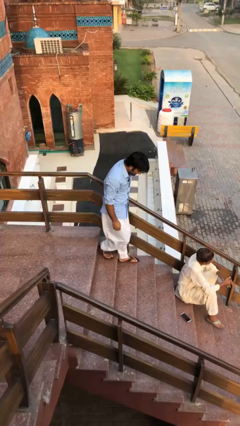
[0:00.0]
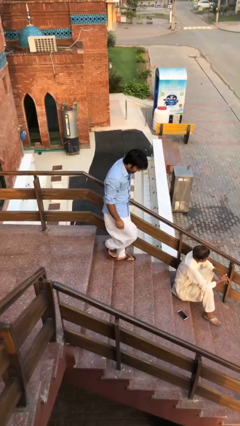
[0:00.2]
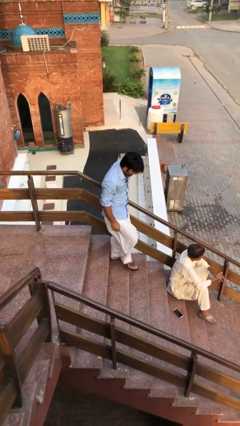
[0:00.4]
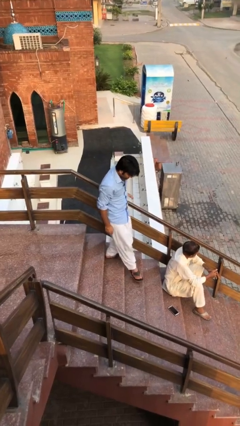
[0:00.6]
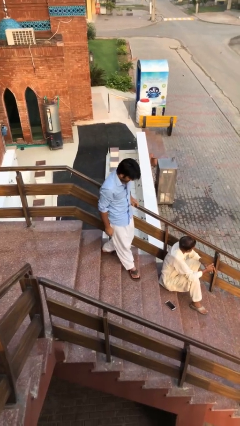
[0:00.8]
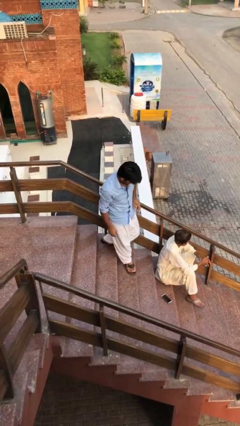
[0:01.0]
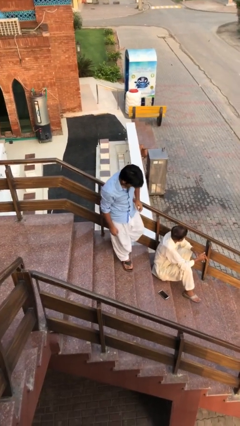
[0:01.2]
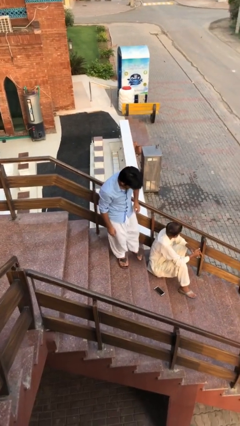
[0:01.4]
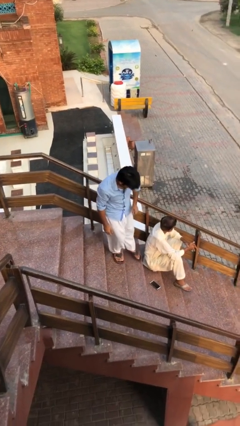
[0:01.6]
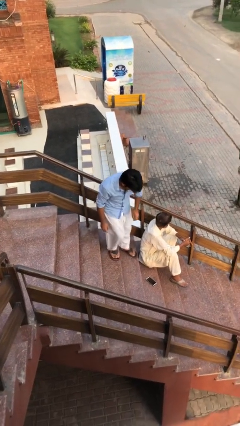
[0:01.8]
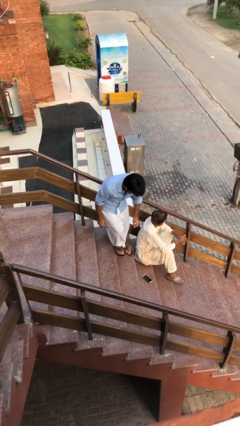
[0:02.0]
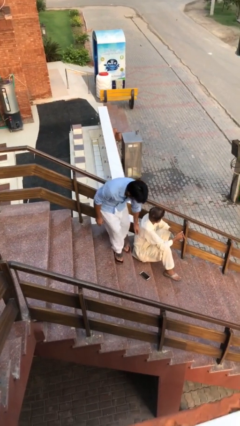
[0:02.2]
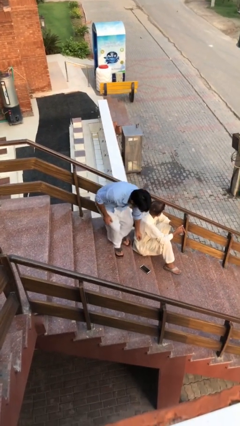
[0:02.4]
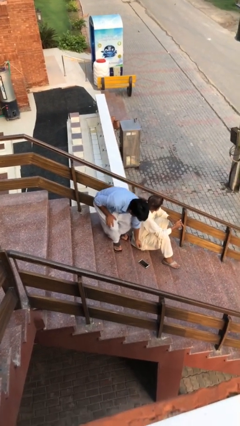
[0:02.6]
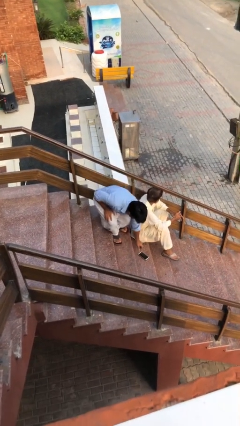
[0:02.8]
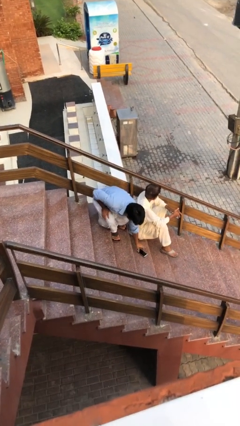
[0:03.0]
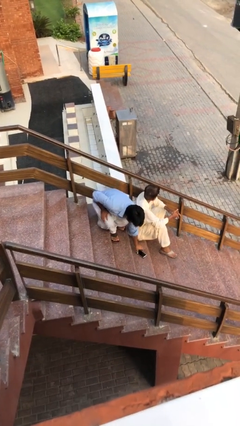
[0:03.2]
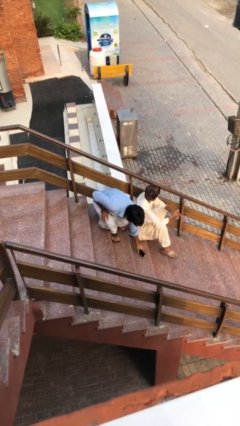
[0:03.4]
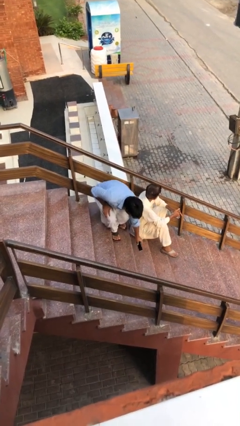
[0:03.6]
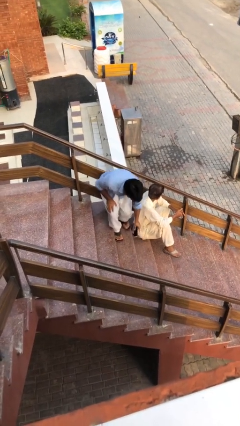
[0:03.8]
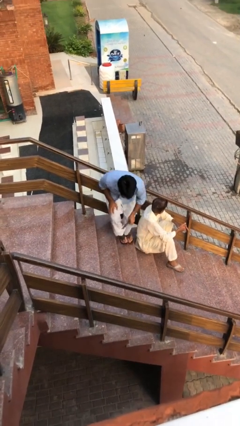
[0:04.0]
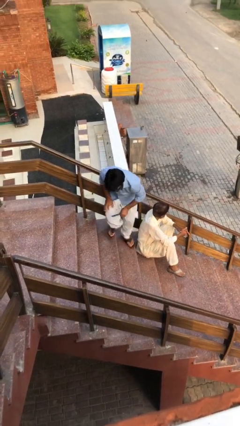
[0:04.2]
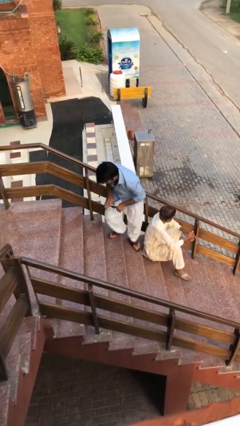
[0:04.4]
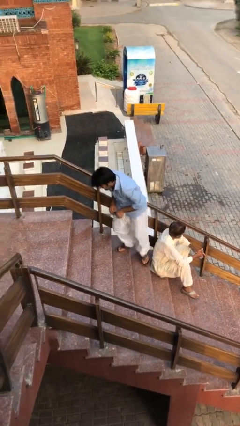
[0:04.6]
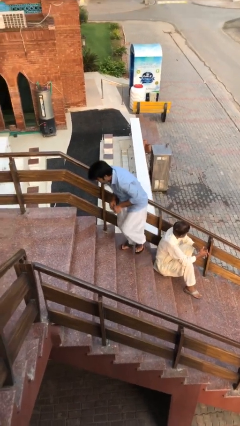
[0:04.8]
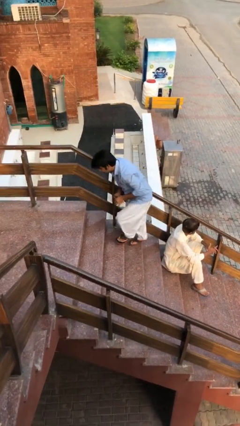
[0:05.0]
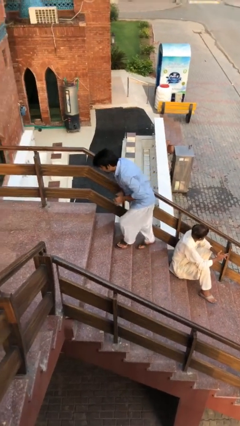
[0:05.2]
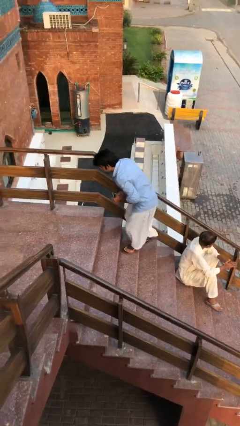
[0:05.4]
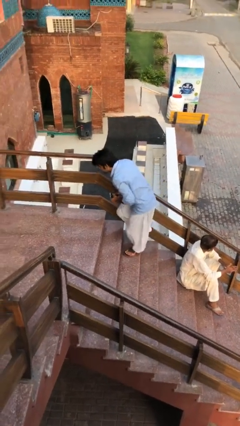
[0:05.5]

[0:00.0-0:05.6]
person steals object from person

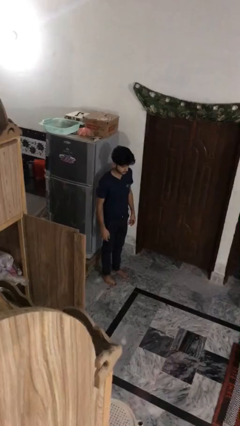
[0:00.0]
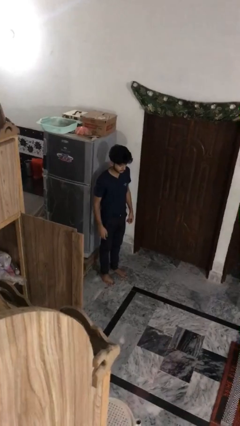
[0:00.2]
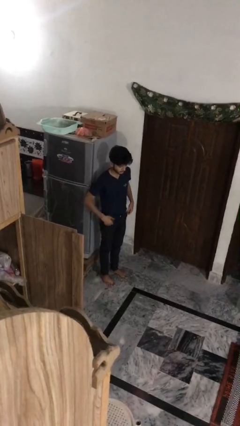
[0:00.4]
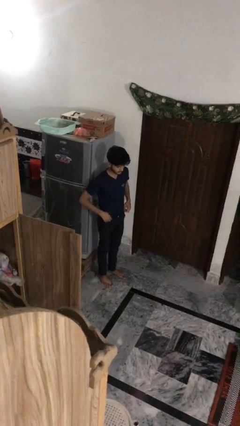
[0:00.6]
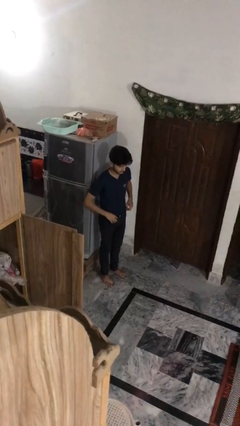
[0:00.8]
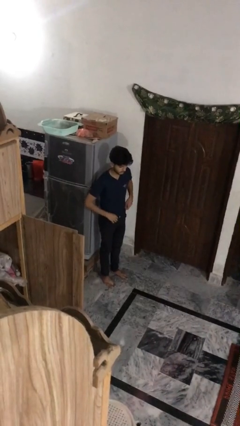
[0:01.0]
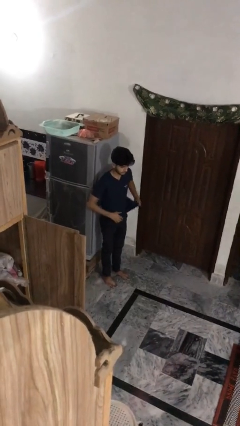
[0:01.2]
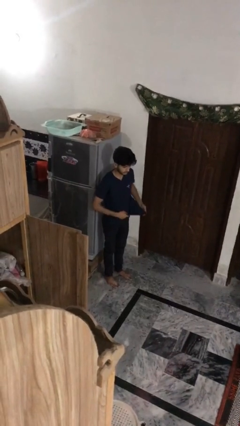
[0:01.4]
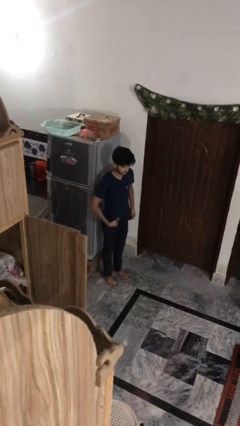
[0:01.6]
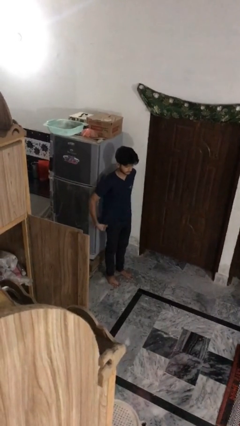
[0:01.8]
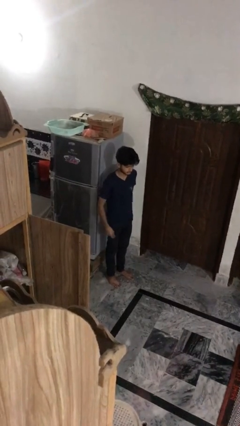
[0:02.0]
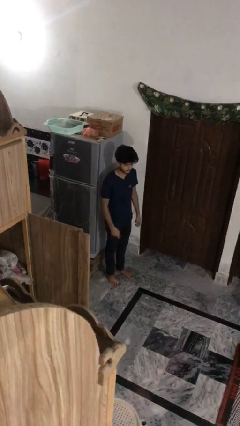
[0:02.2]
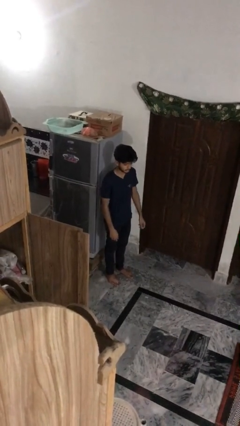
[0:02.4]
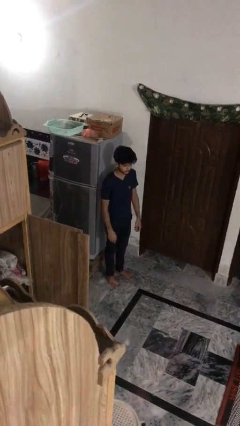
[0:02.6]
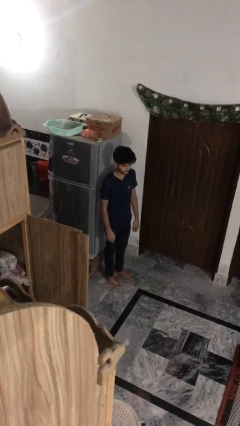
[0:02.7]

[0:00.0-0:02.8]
person untucks shirt

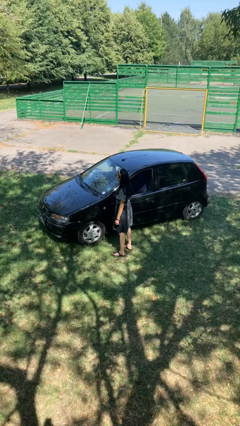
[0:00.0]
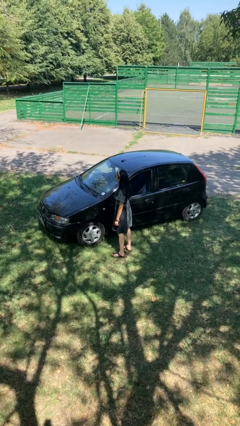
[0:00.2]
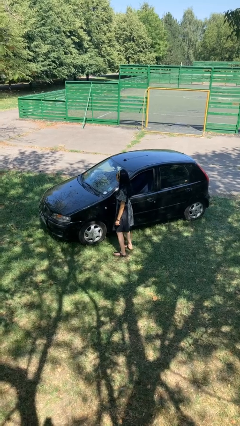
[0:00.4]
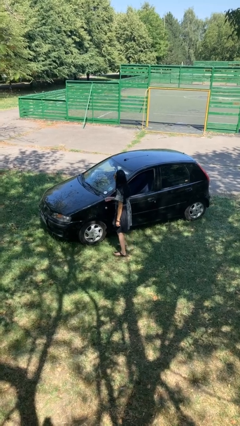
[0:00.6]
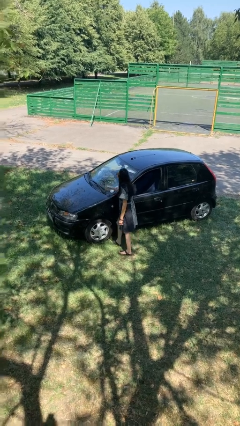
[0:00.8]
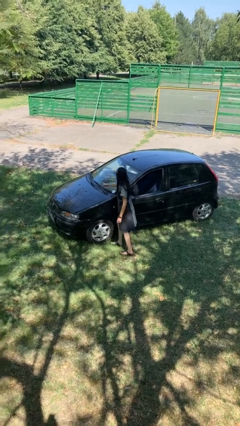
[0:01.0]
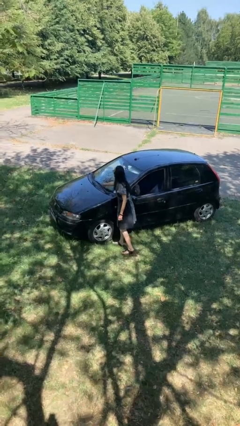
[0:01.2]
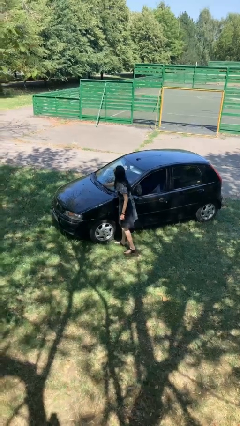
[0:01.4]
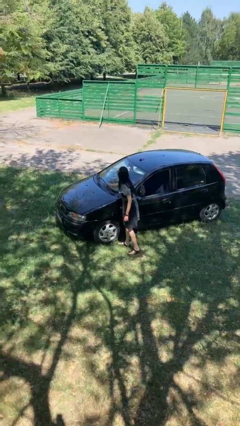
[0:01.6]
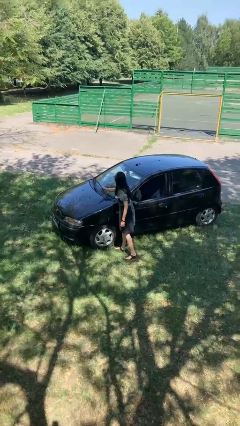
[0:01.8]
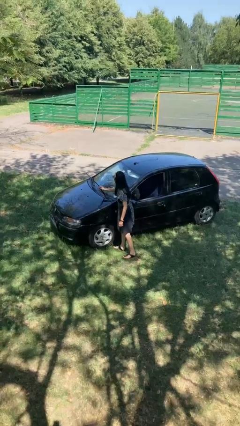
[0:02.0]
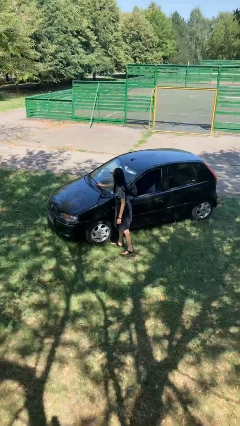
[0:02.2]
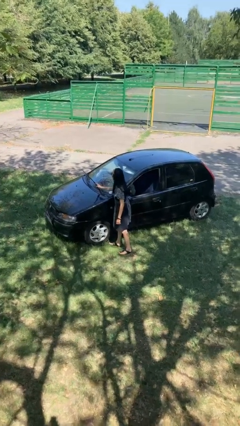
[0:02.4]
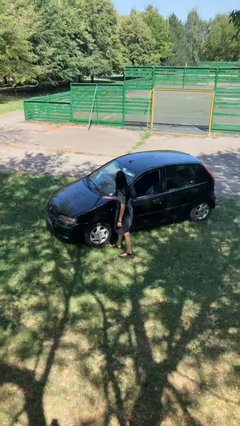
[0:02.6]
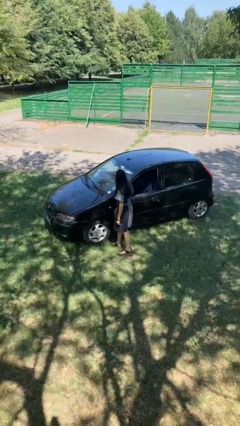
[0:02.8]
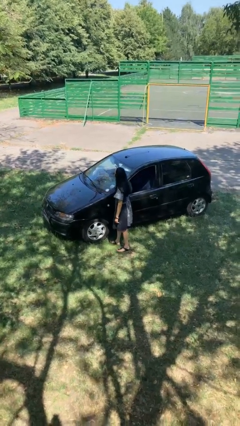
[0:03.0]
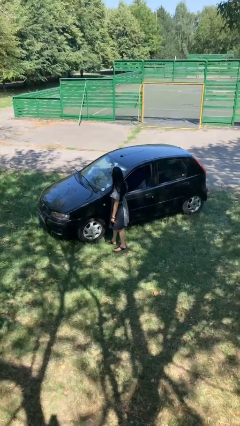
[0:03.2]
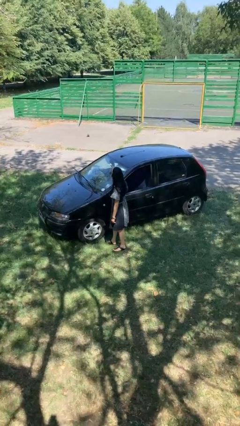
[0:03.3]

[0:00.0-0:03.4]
person flips up car wipers

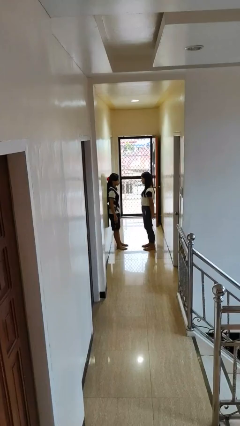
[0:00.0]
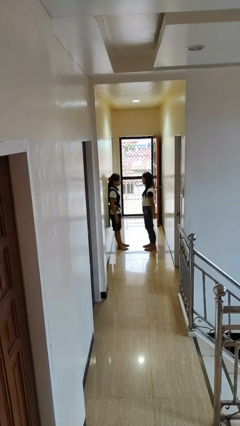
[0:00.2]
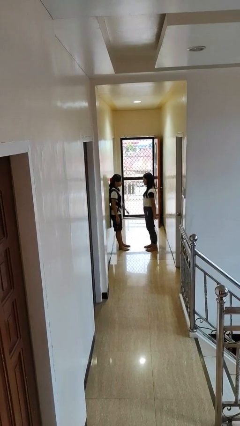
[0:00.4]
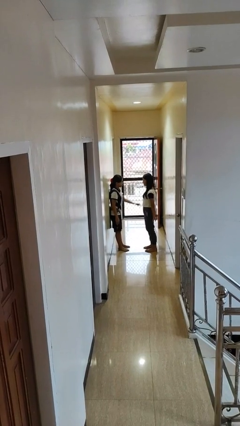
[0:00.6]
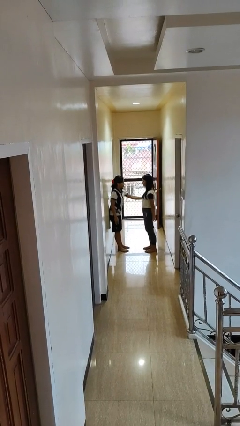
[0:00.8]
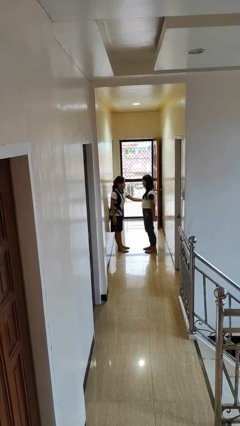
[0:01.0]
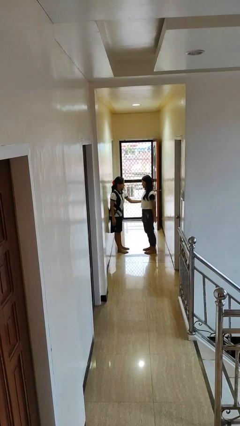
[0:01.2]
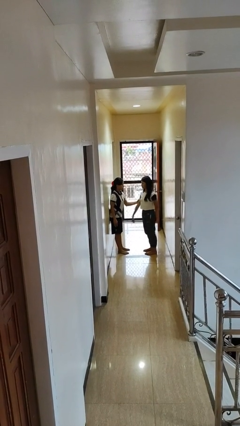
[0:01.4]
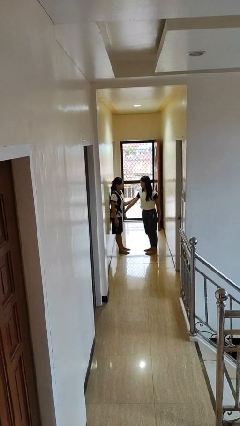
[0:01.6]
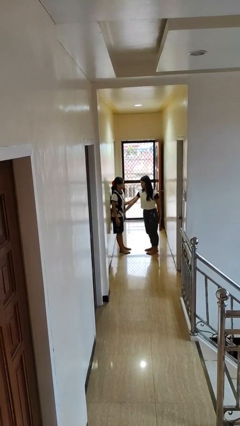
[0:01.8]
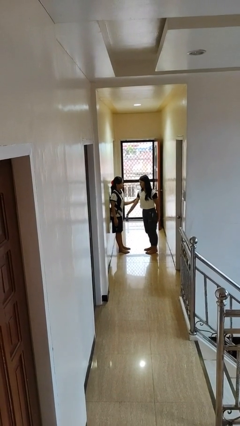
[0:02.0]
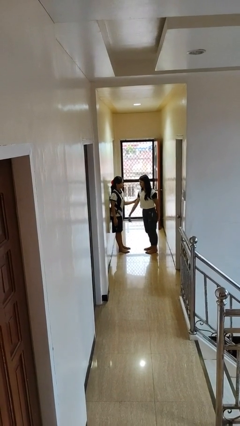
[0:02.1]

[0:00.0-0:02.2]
person grabs person by bicep

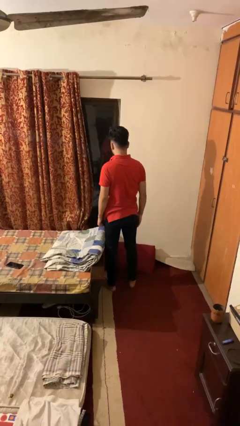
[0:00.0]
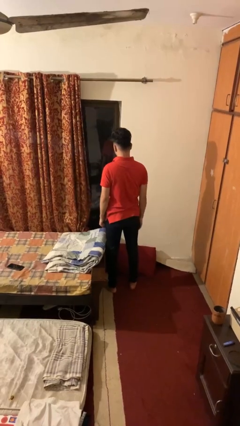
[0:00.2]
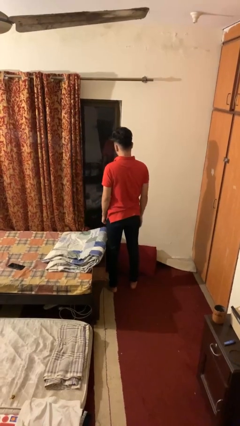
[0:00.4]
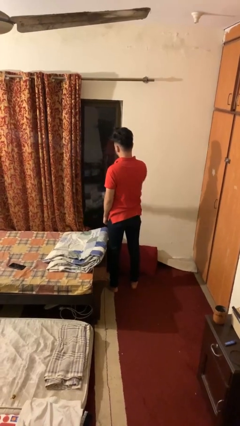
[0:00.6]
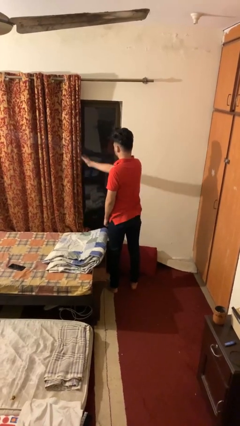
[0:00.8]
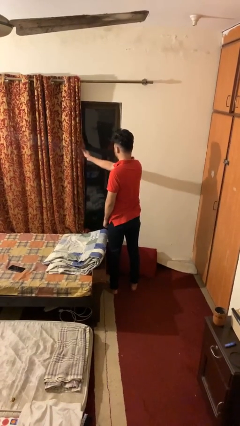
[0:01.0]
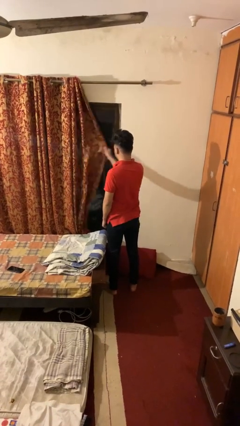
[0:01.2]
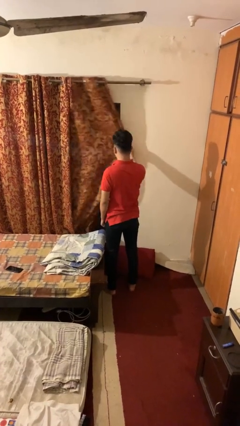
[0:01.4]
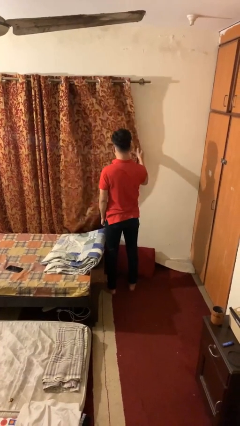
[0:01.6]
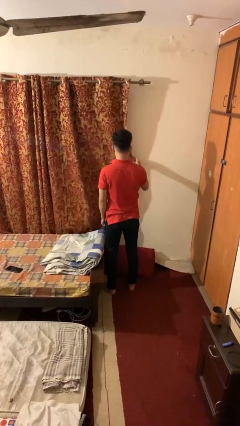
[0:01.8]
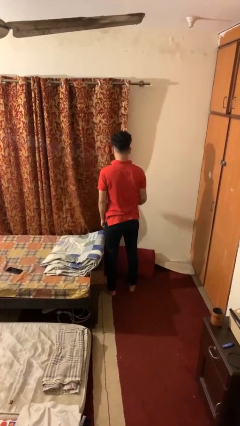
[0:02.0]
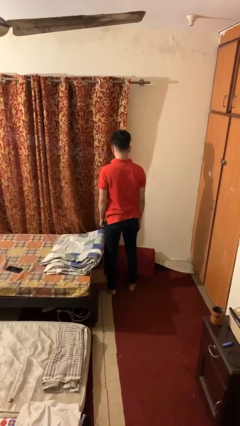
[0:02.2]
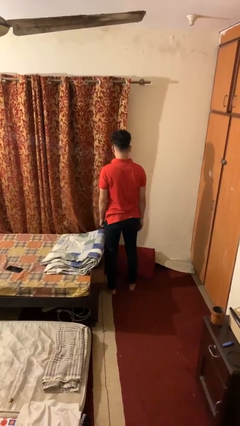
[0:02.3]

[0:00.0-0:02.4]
person closes curtains

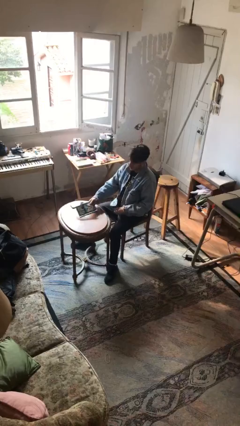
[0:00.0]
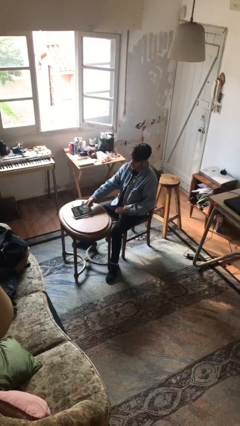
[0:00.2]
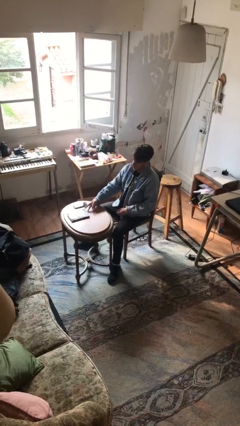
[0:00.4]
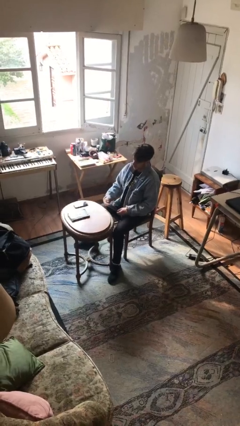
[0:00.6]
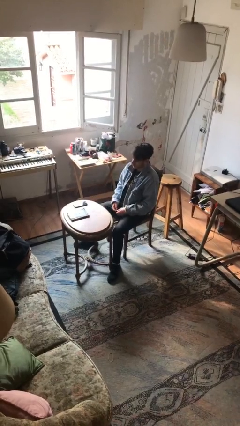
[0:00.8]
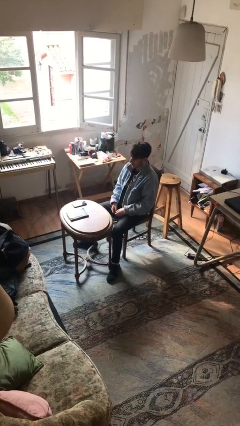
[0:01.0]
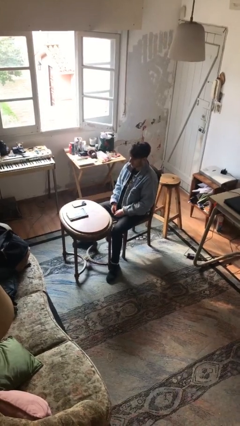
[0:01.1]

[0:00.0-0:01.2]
person puts down object on table
